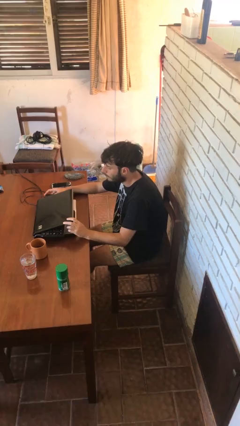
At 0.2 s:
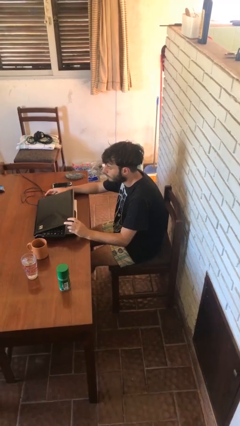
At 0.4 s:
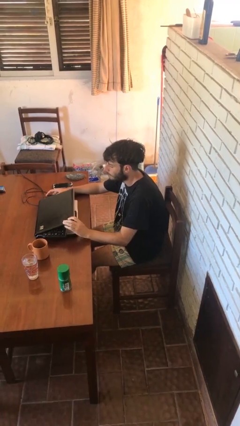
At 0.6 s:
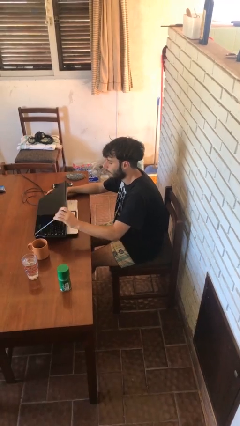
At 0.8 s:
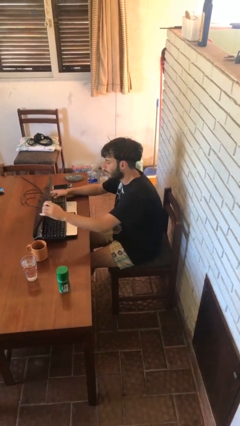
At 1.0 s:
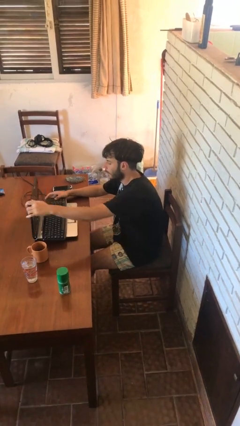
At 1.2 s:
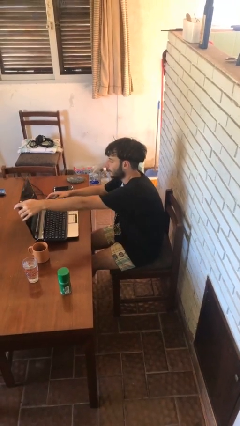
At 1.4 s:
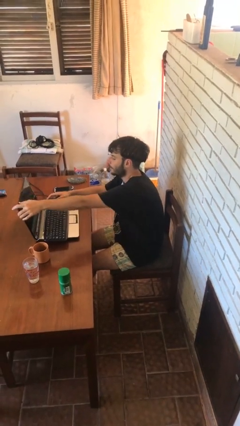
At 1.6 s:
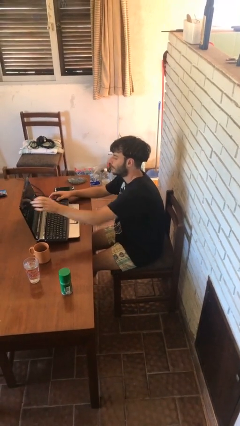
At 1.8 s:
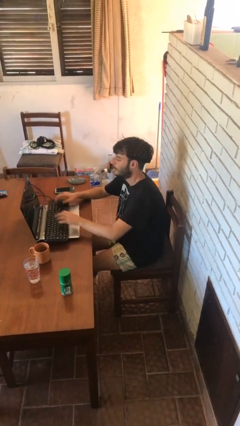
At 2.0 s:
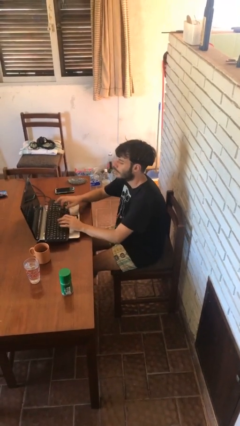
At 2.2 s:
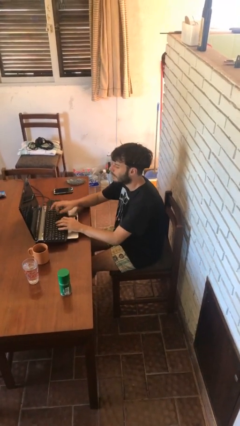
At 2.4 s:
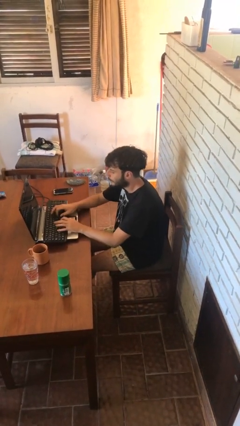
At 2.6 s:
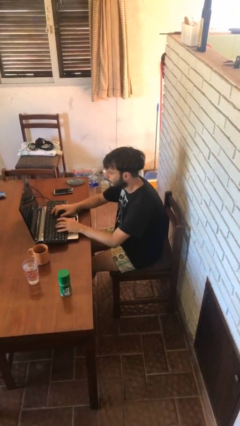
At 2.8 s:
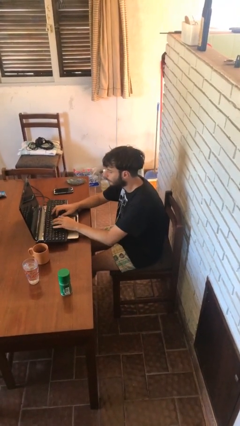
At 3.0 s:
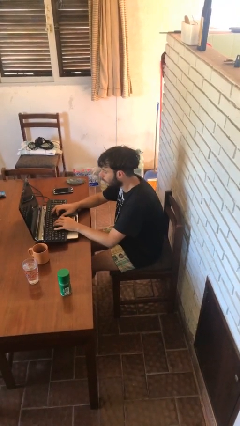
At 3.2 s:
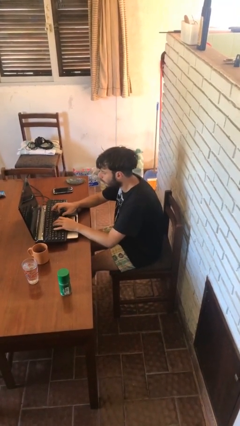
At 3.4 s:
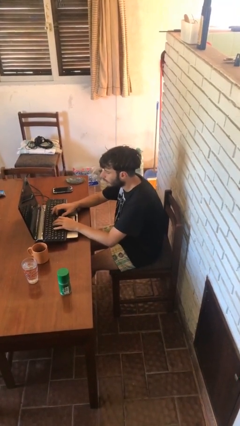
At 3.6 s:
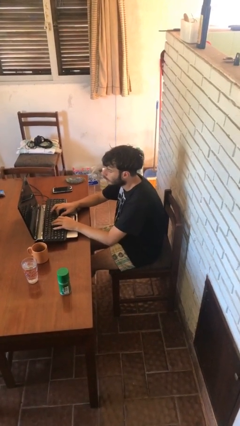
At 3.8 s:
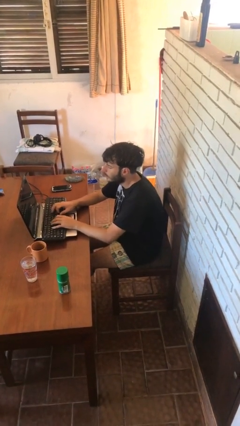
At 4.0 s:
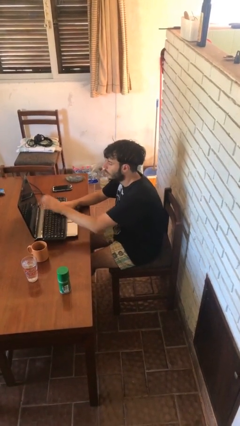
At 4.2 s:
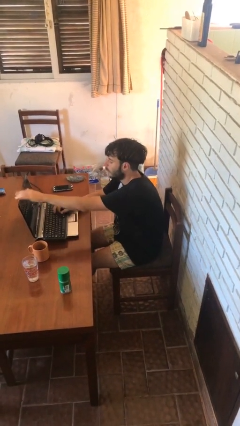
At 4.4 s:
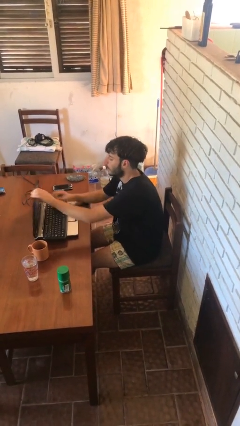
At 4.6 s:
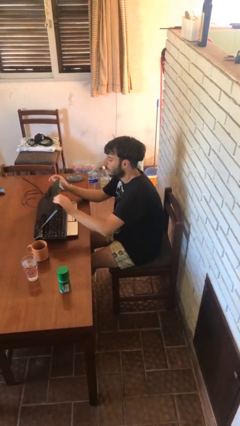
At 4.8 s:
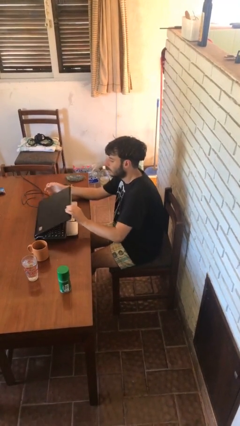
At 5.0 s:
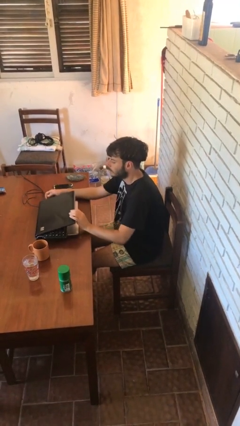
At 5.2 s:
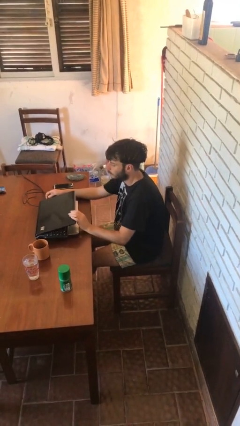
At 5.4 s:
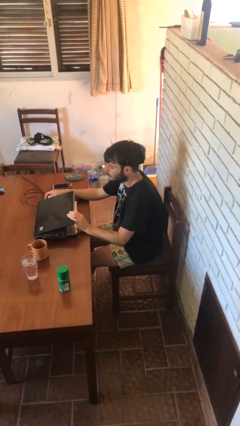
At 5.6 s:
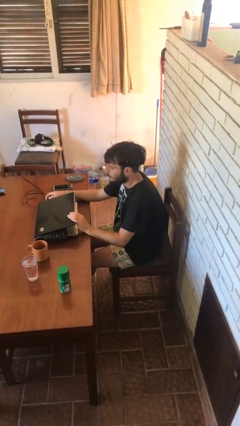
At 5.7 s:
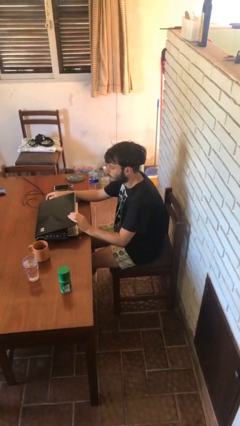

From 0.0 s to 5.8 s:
person interacts with laptop

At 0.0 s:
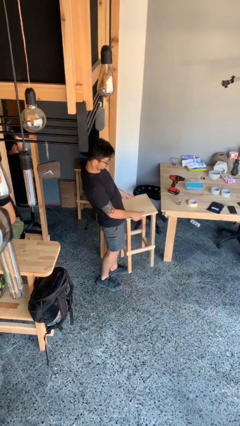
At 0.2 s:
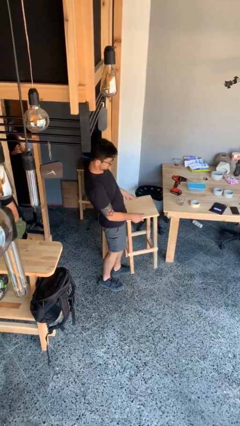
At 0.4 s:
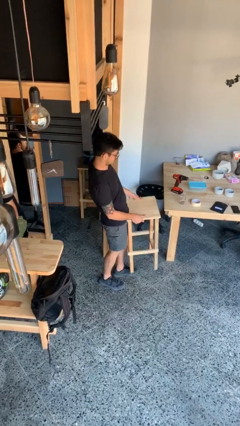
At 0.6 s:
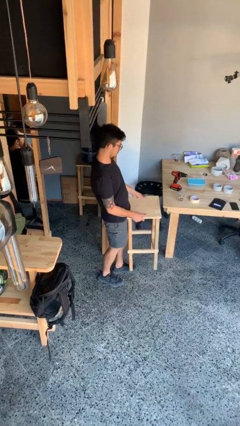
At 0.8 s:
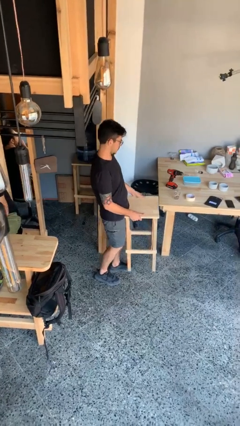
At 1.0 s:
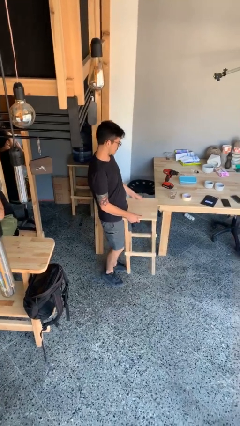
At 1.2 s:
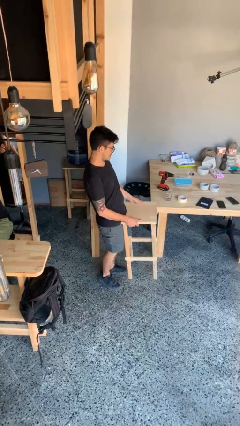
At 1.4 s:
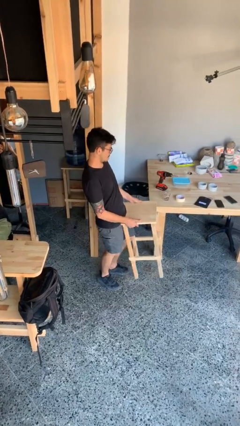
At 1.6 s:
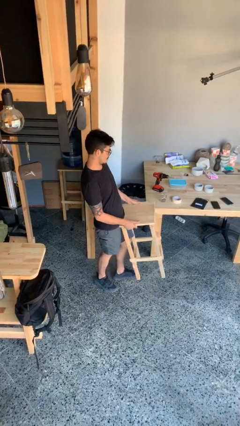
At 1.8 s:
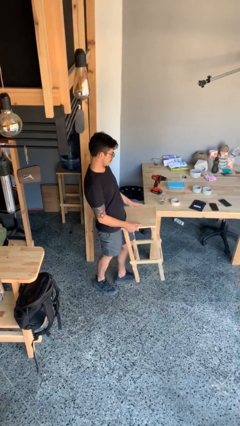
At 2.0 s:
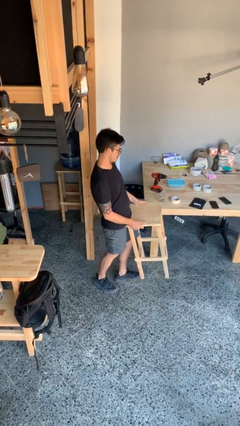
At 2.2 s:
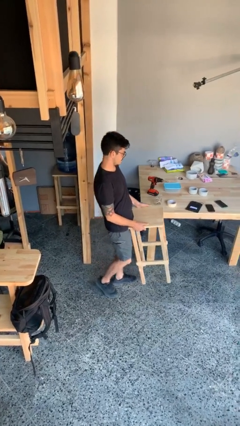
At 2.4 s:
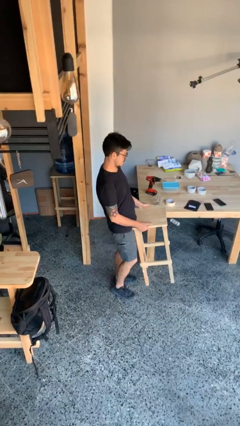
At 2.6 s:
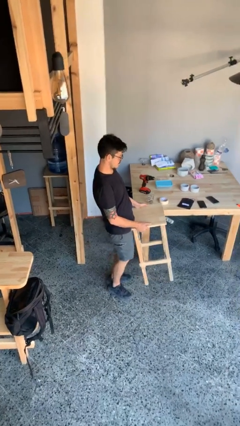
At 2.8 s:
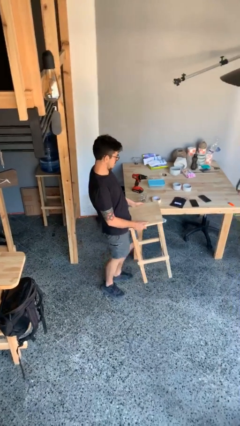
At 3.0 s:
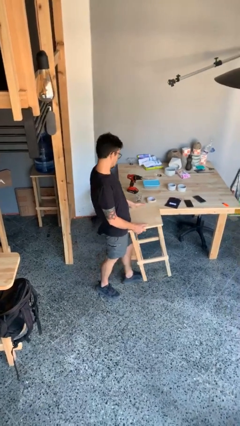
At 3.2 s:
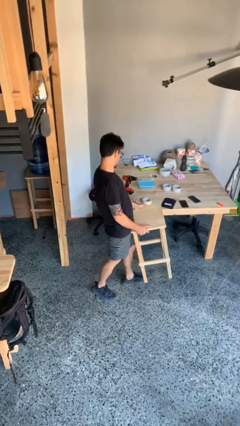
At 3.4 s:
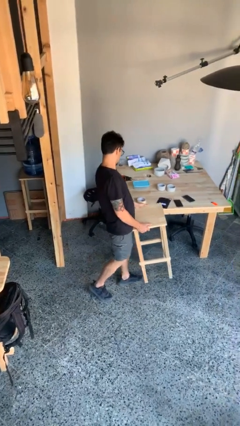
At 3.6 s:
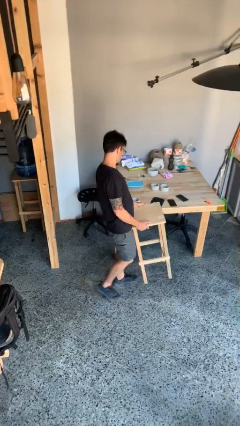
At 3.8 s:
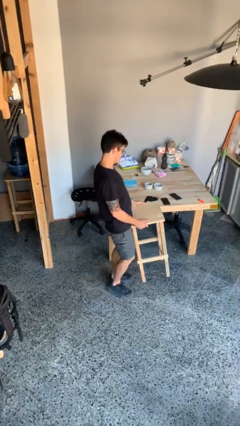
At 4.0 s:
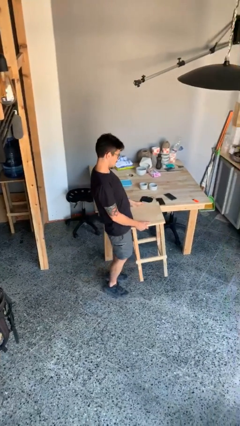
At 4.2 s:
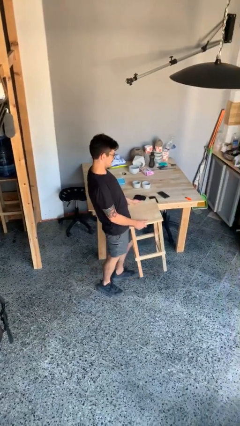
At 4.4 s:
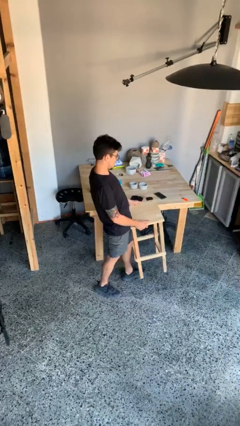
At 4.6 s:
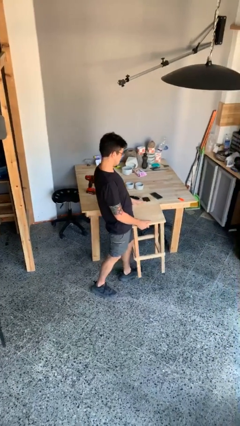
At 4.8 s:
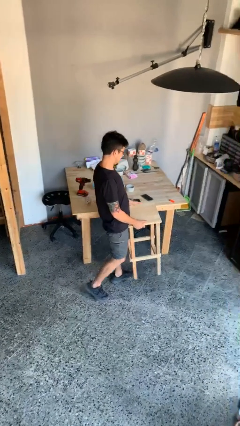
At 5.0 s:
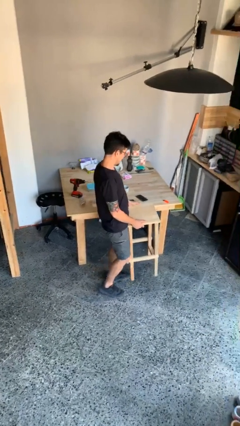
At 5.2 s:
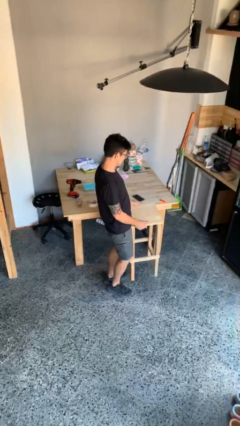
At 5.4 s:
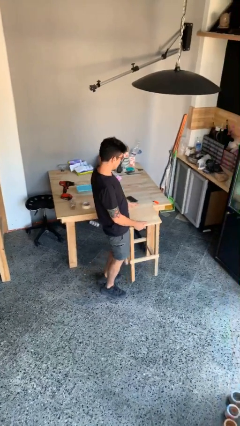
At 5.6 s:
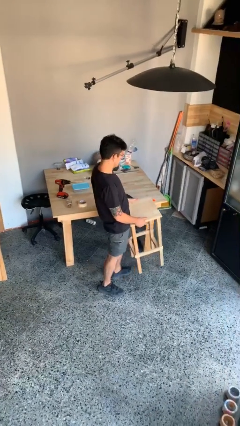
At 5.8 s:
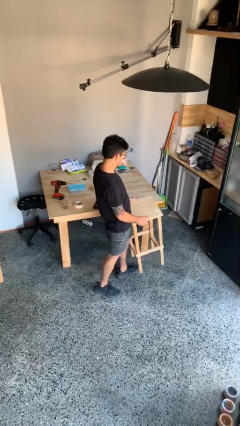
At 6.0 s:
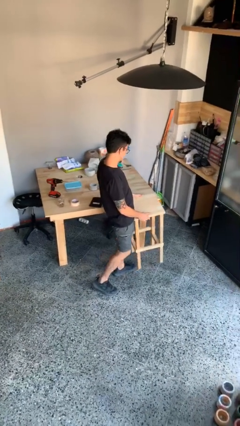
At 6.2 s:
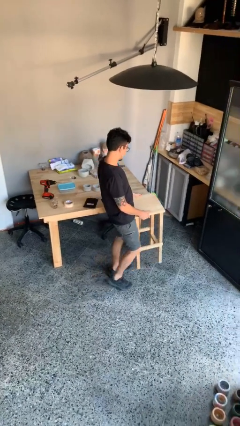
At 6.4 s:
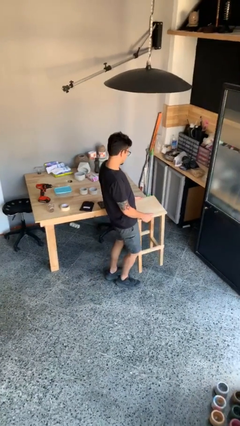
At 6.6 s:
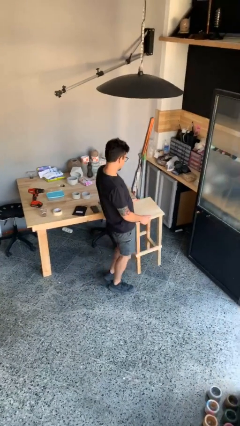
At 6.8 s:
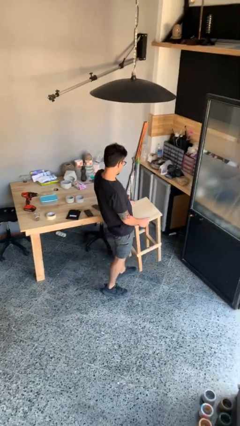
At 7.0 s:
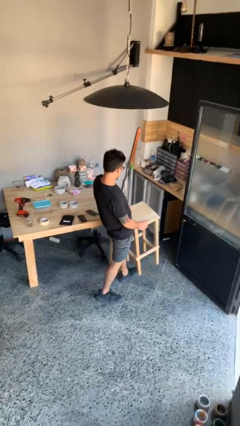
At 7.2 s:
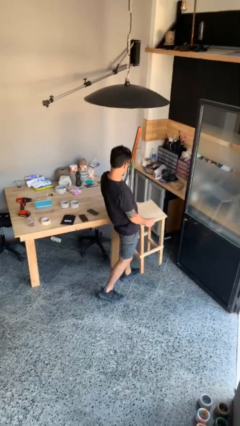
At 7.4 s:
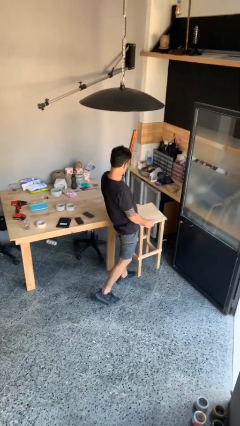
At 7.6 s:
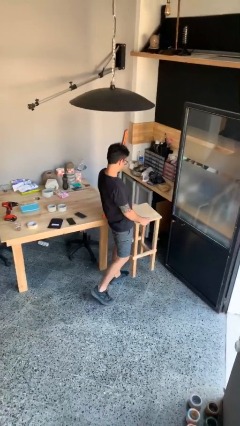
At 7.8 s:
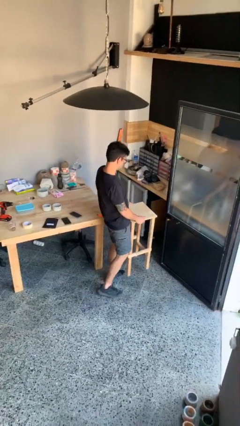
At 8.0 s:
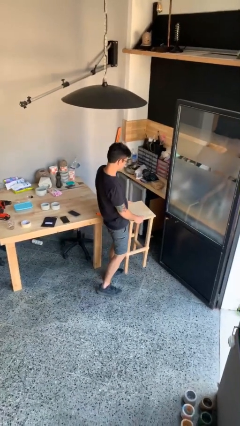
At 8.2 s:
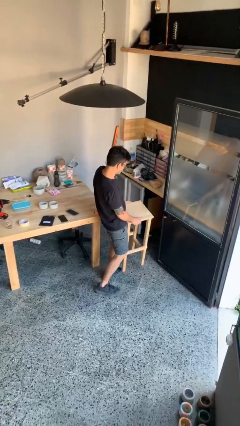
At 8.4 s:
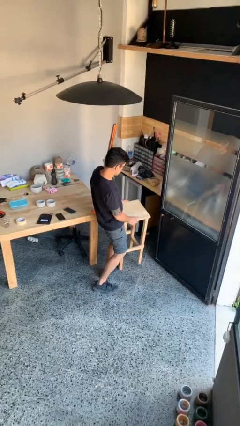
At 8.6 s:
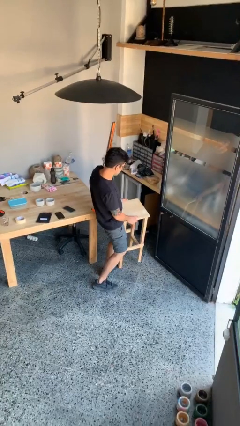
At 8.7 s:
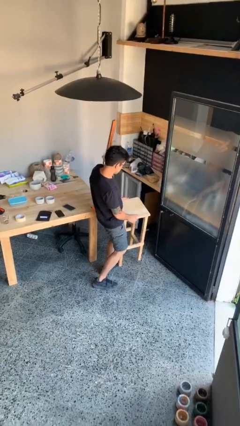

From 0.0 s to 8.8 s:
person carries heavy object

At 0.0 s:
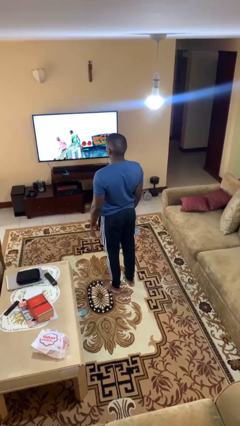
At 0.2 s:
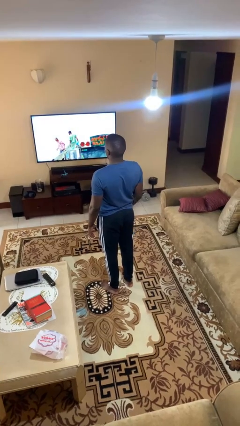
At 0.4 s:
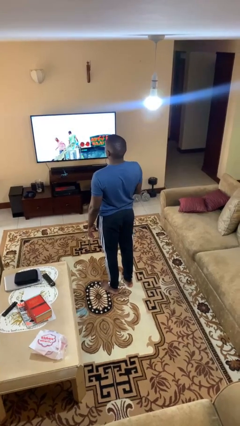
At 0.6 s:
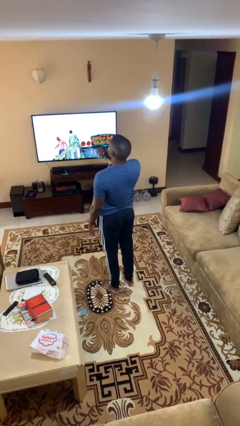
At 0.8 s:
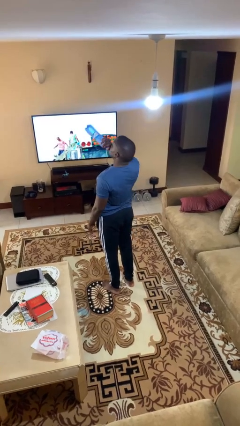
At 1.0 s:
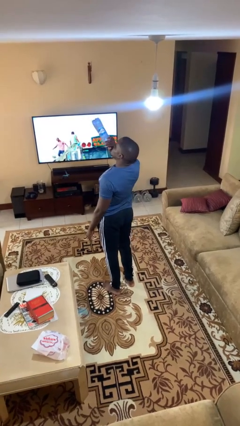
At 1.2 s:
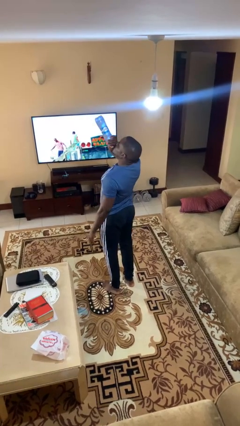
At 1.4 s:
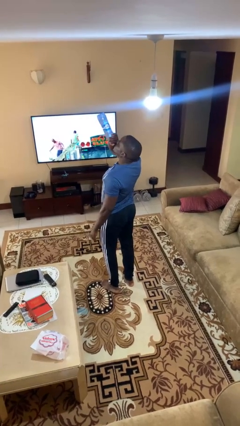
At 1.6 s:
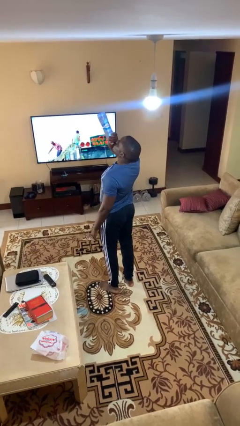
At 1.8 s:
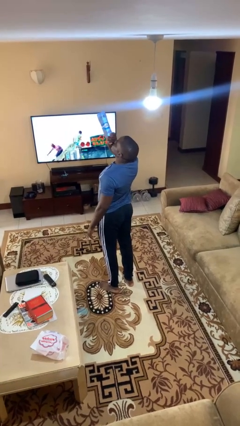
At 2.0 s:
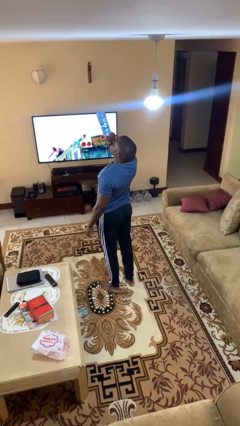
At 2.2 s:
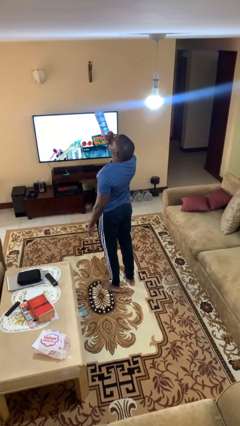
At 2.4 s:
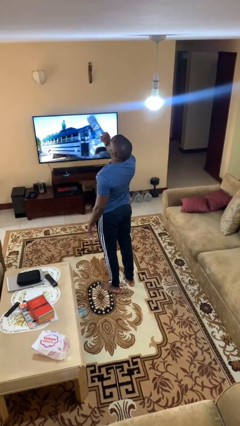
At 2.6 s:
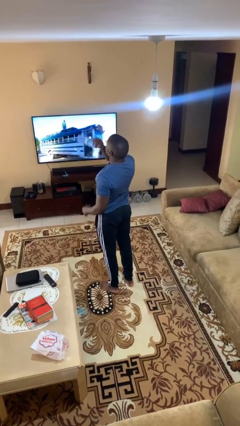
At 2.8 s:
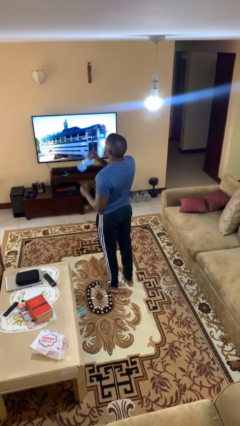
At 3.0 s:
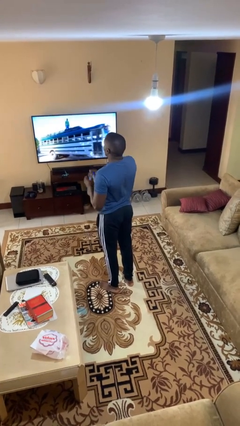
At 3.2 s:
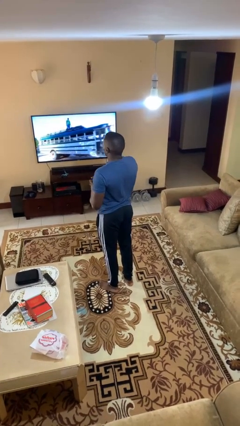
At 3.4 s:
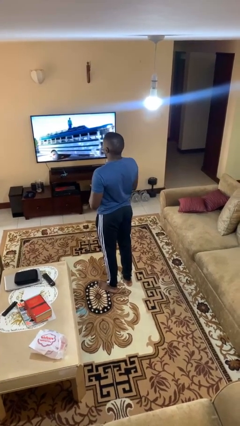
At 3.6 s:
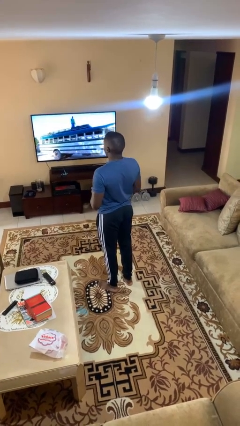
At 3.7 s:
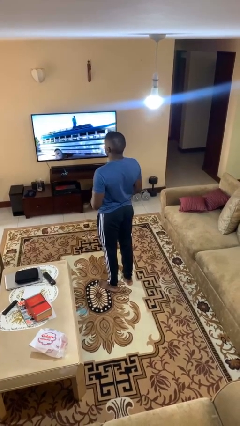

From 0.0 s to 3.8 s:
person drinks from bottle
